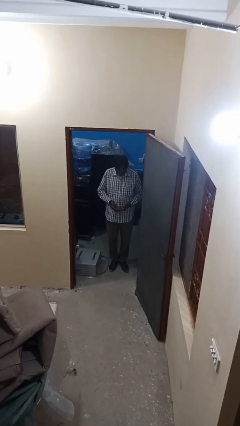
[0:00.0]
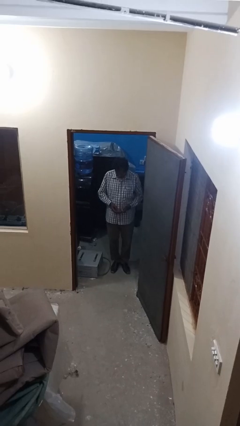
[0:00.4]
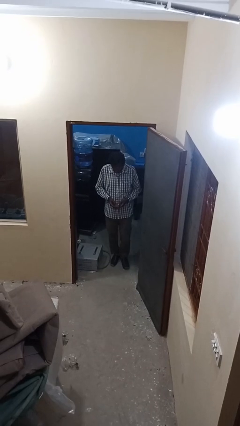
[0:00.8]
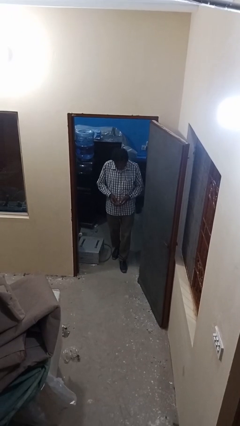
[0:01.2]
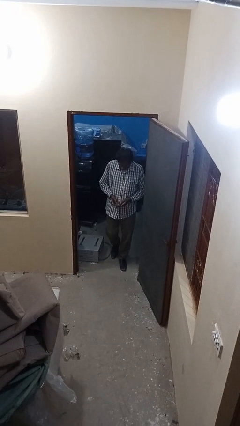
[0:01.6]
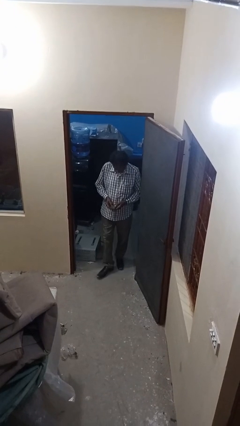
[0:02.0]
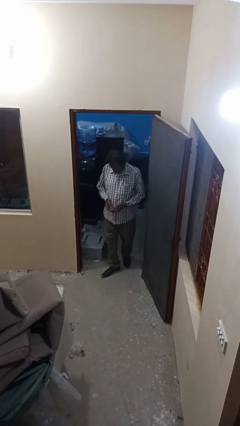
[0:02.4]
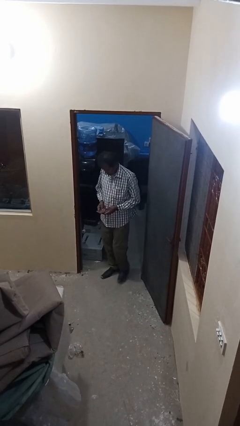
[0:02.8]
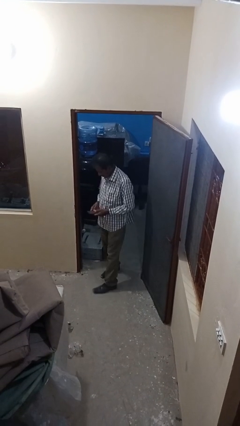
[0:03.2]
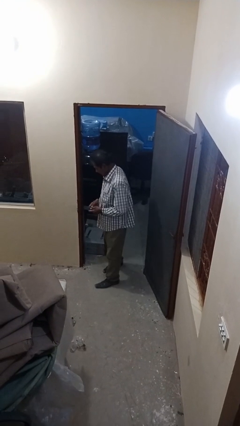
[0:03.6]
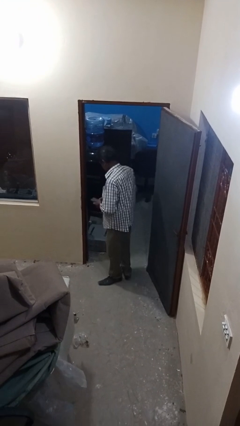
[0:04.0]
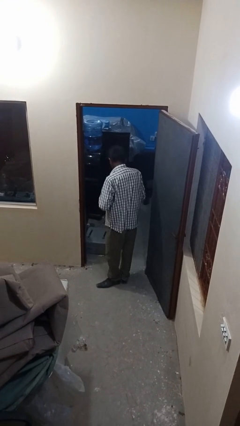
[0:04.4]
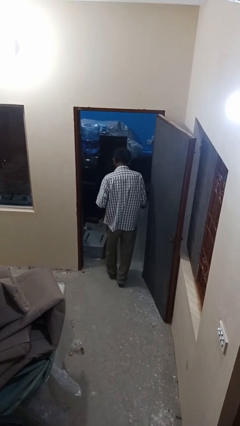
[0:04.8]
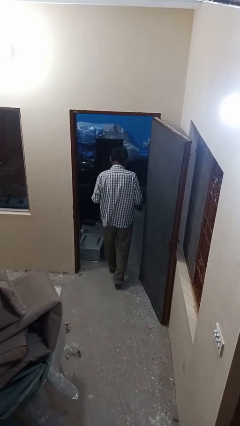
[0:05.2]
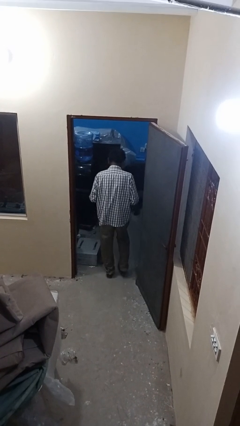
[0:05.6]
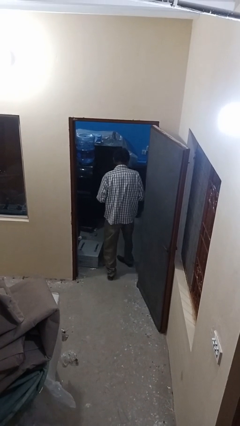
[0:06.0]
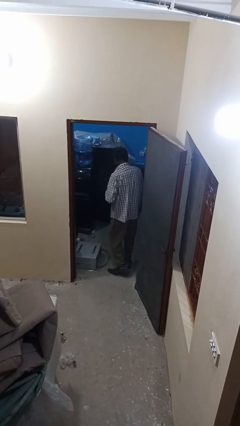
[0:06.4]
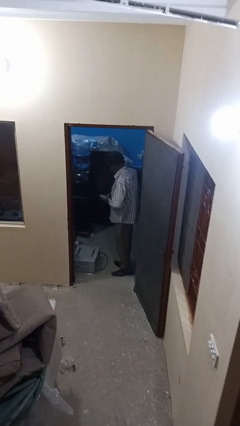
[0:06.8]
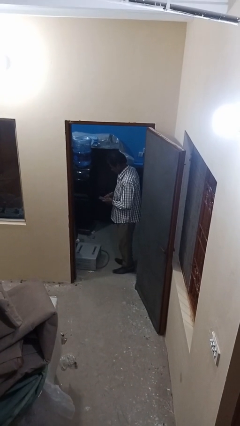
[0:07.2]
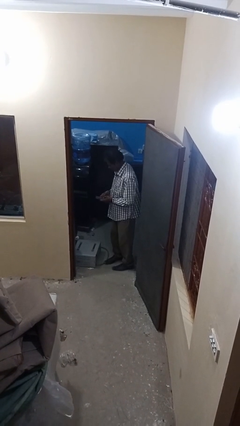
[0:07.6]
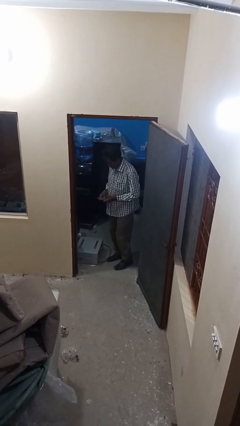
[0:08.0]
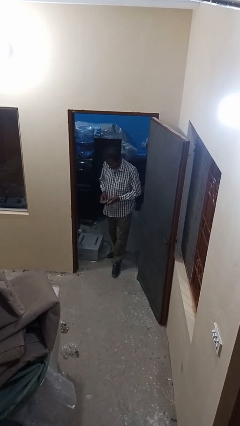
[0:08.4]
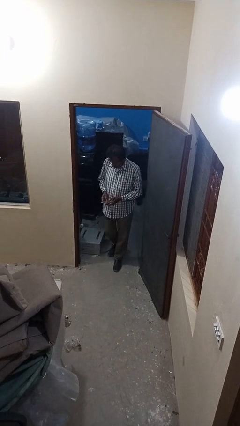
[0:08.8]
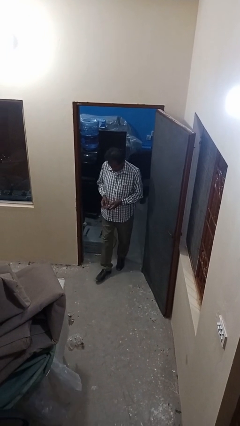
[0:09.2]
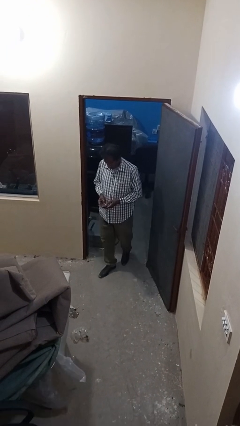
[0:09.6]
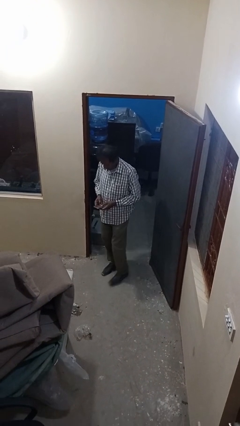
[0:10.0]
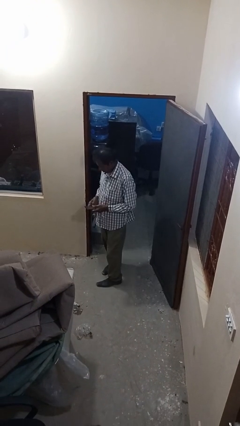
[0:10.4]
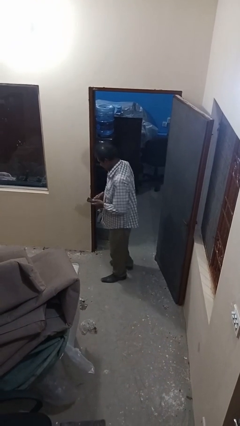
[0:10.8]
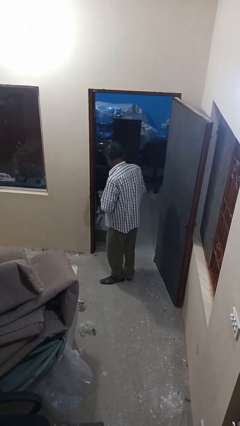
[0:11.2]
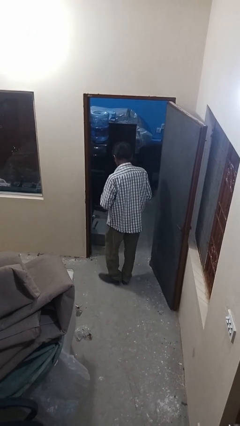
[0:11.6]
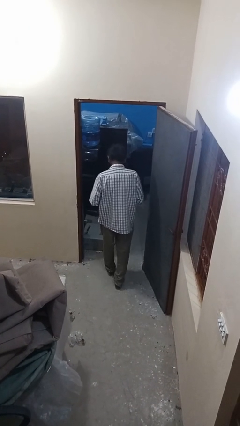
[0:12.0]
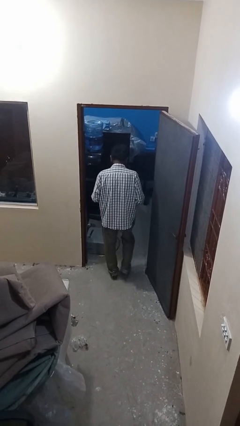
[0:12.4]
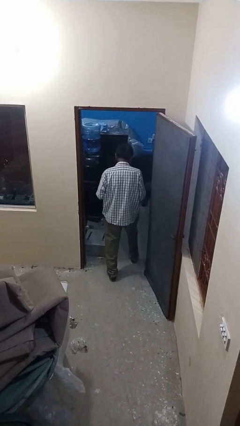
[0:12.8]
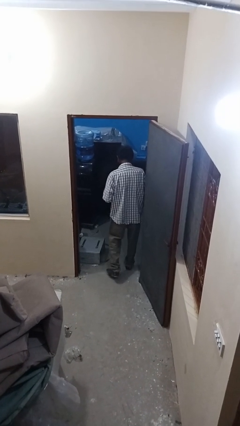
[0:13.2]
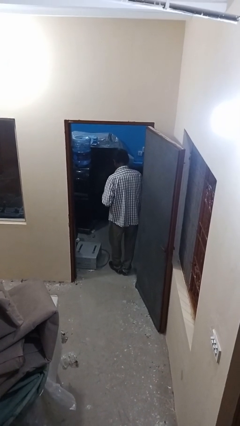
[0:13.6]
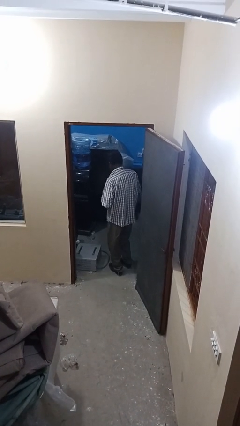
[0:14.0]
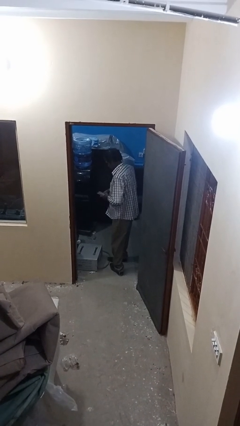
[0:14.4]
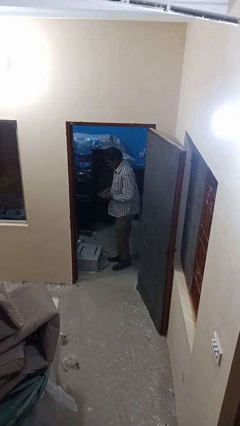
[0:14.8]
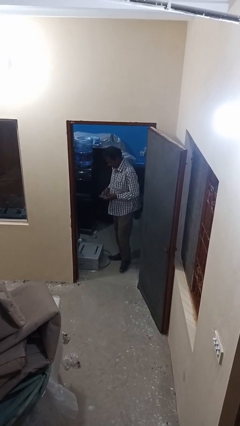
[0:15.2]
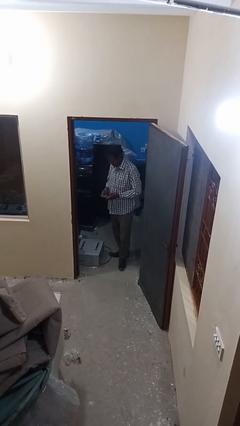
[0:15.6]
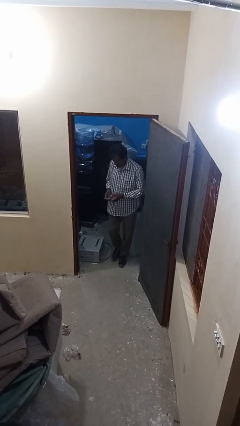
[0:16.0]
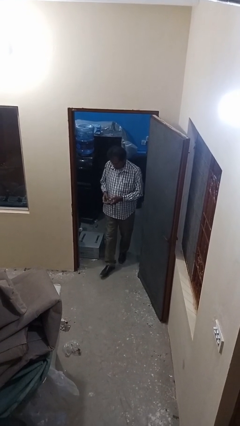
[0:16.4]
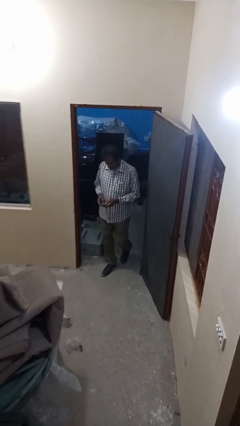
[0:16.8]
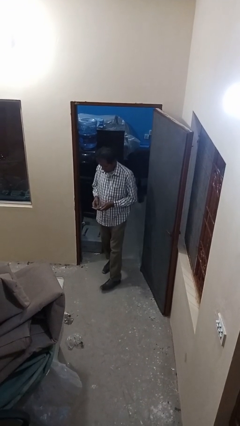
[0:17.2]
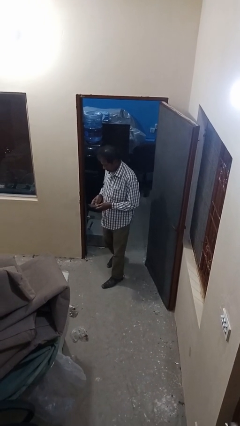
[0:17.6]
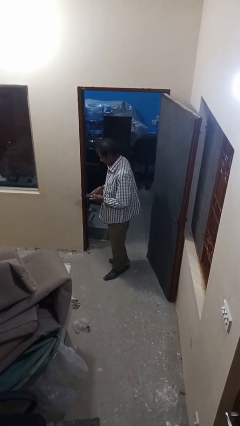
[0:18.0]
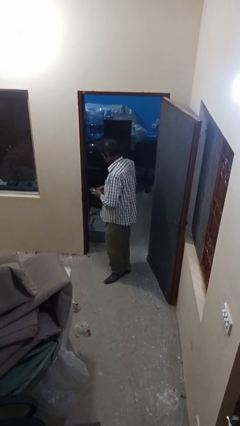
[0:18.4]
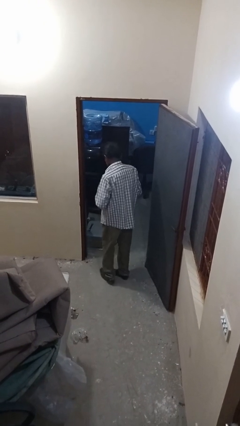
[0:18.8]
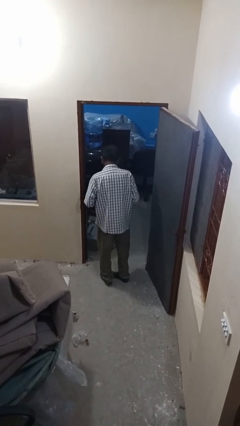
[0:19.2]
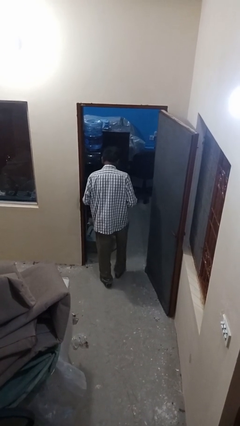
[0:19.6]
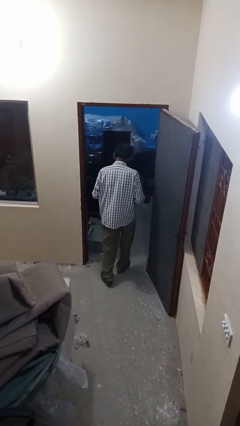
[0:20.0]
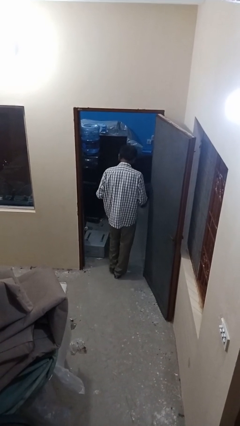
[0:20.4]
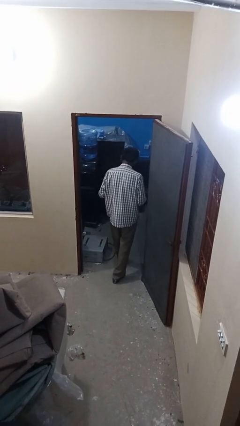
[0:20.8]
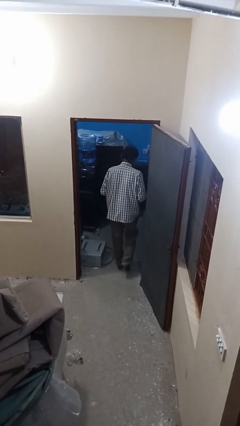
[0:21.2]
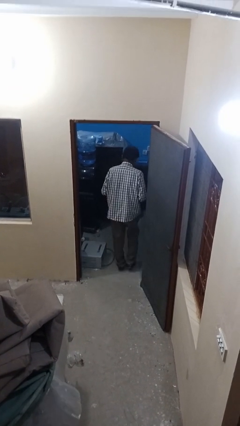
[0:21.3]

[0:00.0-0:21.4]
person texts on phone

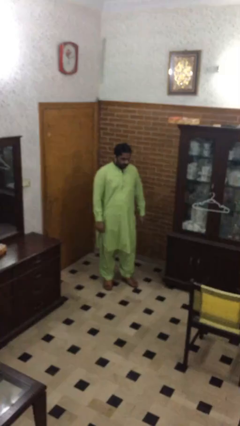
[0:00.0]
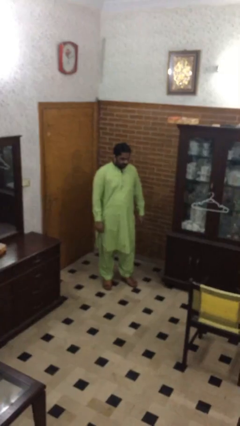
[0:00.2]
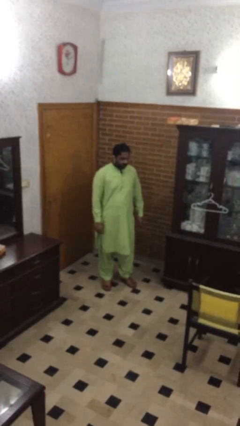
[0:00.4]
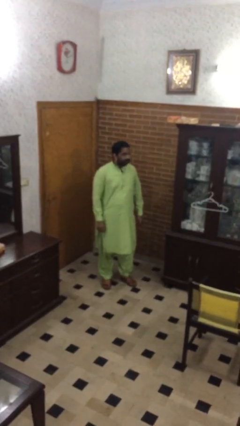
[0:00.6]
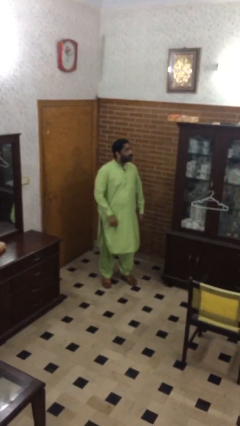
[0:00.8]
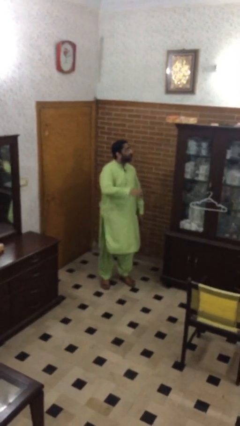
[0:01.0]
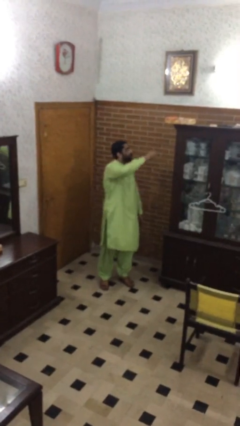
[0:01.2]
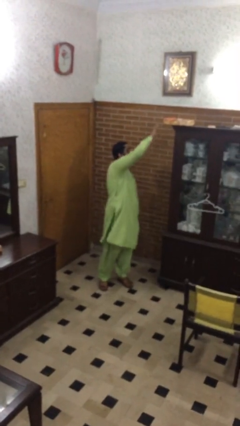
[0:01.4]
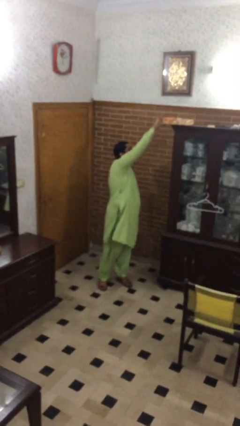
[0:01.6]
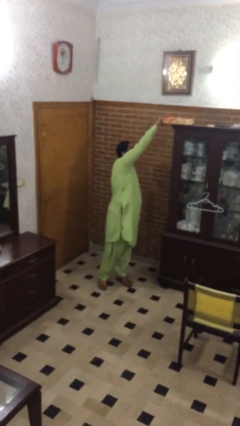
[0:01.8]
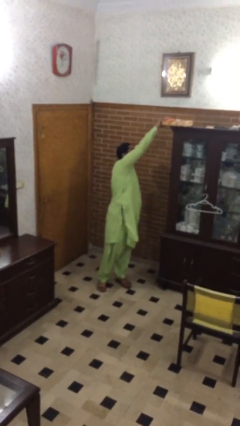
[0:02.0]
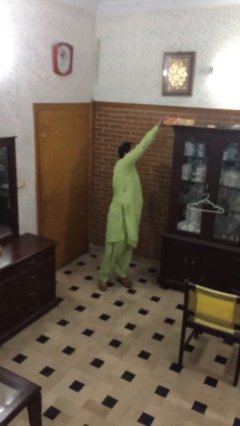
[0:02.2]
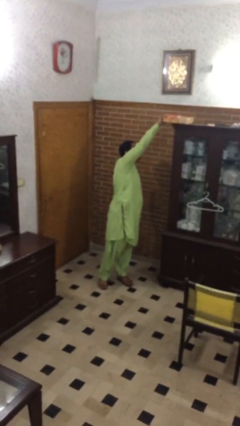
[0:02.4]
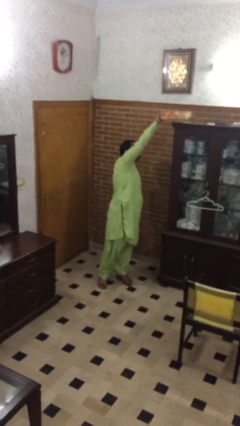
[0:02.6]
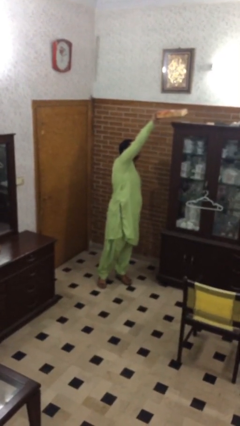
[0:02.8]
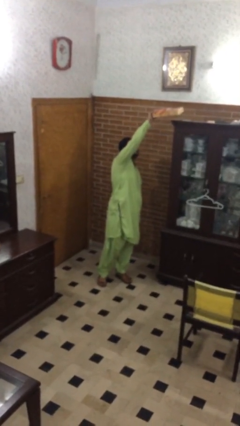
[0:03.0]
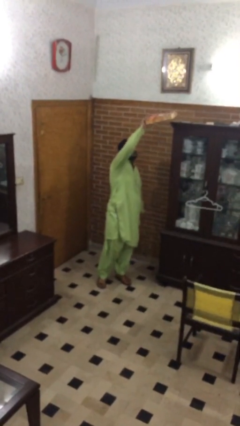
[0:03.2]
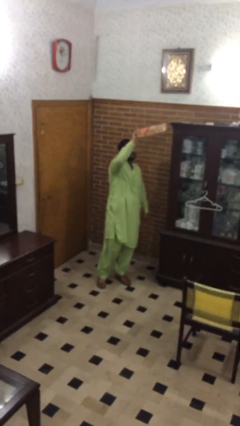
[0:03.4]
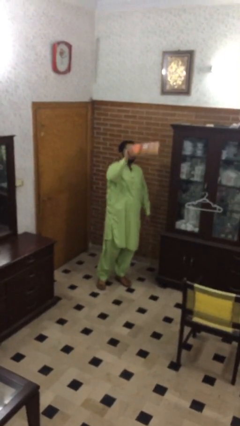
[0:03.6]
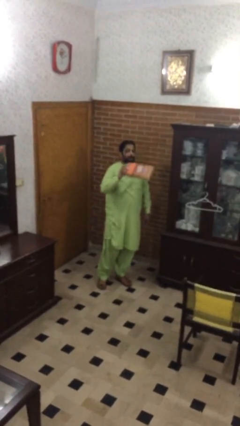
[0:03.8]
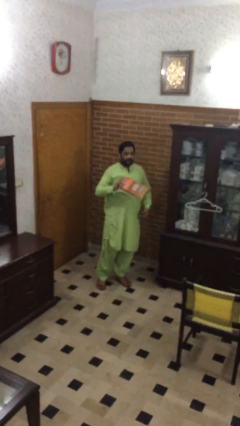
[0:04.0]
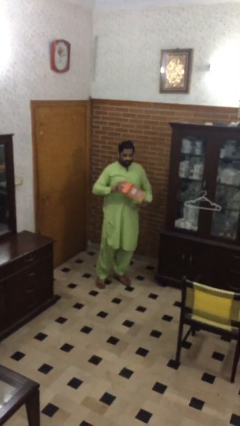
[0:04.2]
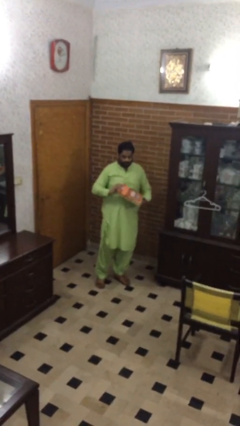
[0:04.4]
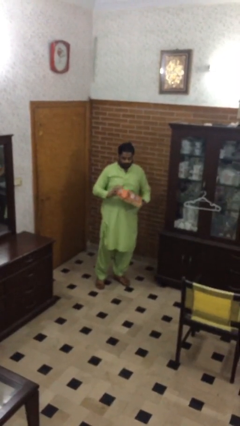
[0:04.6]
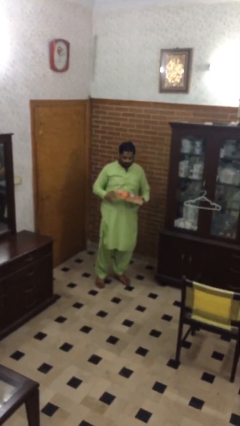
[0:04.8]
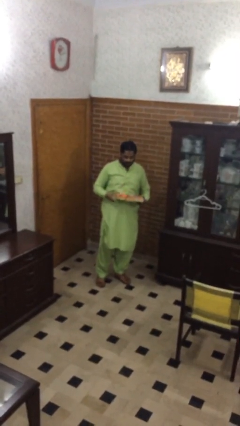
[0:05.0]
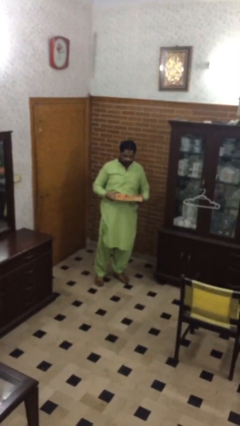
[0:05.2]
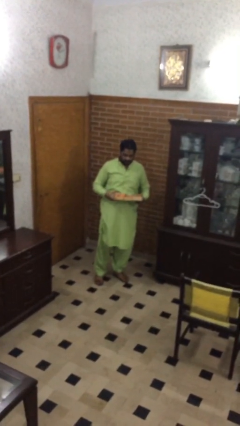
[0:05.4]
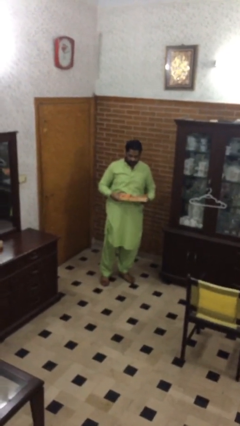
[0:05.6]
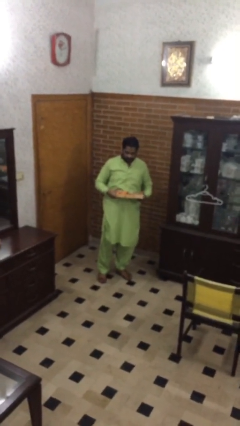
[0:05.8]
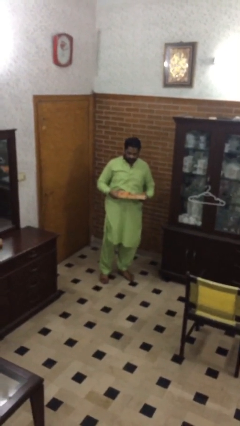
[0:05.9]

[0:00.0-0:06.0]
person picks up object from shelf

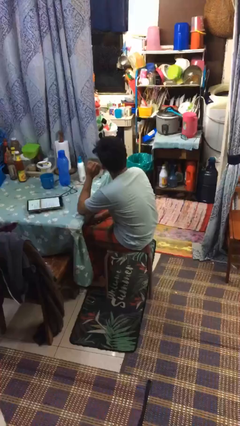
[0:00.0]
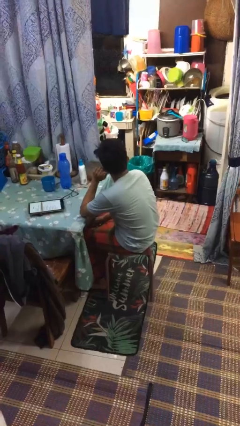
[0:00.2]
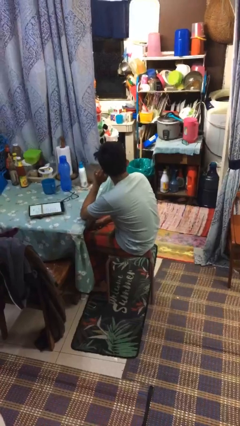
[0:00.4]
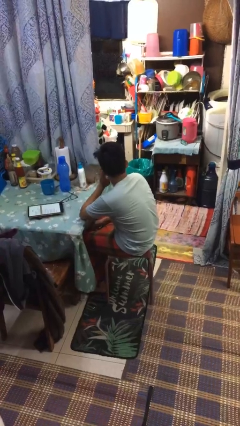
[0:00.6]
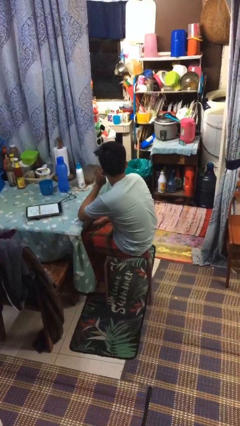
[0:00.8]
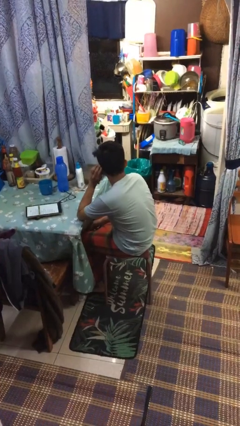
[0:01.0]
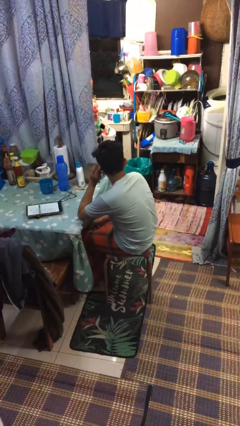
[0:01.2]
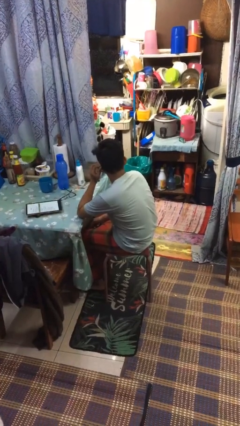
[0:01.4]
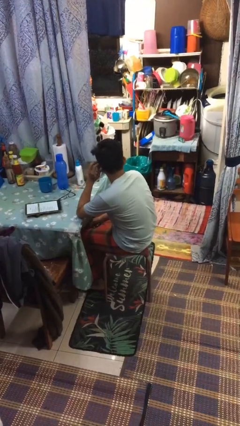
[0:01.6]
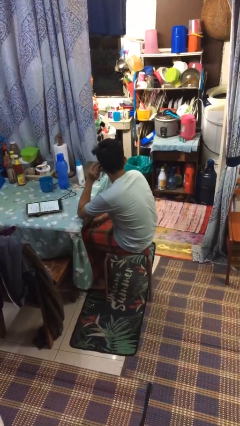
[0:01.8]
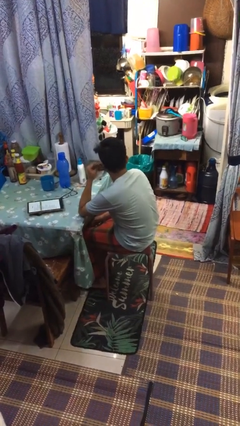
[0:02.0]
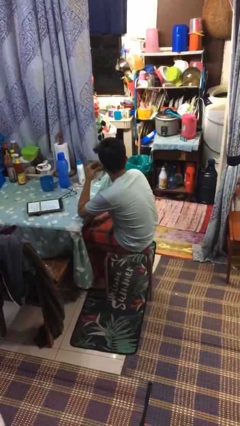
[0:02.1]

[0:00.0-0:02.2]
person touches earlobe
